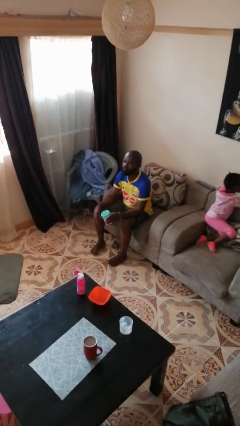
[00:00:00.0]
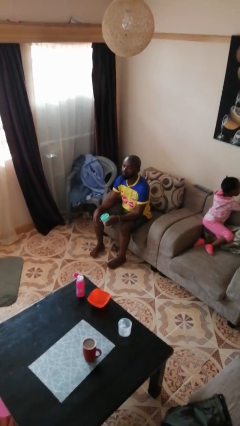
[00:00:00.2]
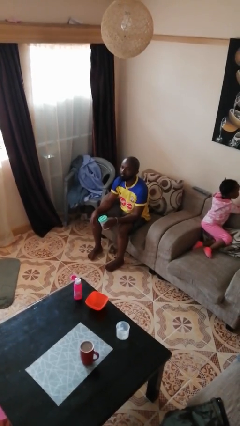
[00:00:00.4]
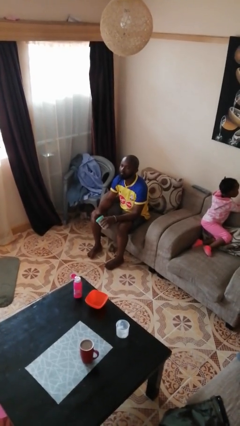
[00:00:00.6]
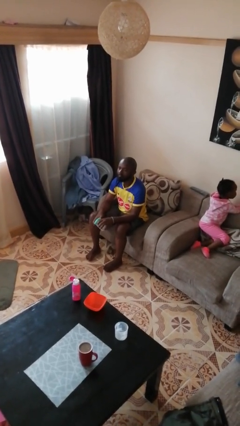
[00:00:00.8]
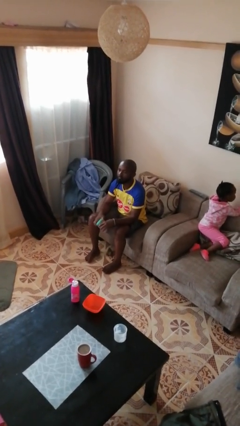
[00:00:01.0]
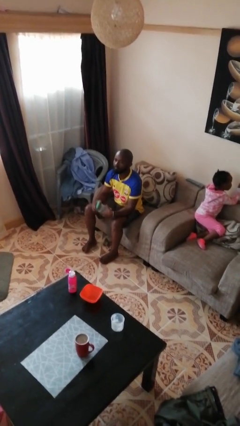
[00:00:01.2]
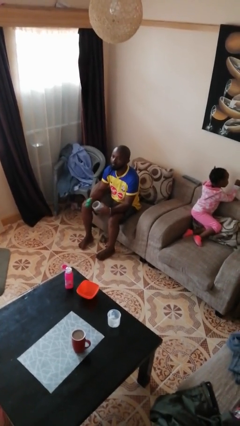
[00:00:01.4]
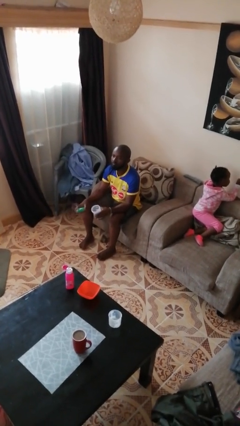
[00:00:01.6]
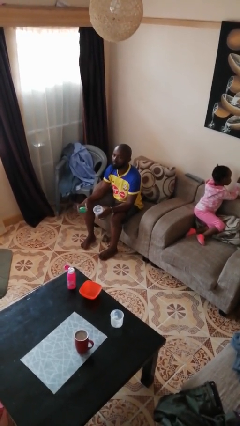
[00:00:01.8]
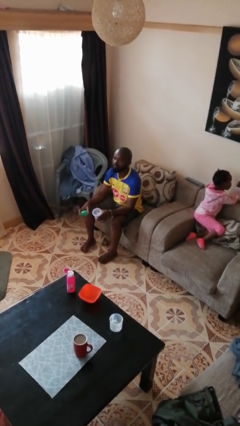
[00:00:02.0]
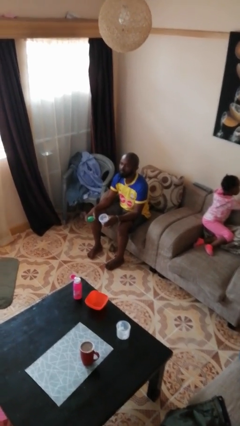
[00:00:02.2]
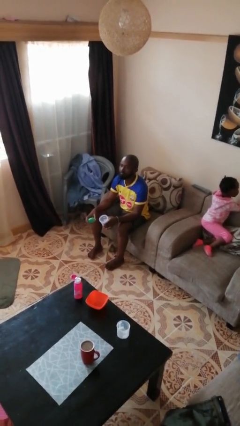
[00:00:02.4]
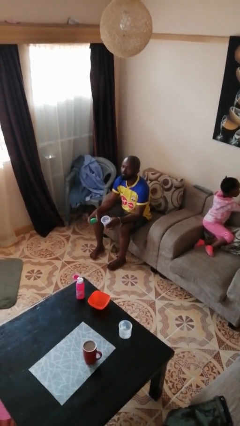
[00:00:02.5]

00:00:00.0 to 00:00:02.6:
person opens jar

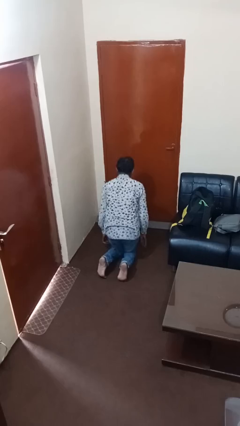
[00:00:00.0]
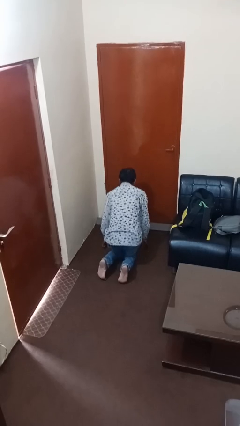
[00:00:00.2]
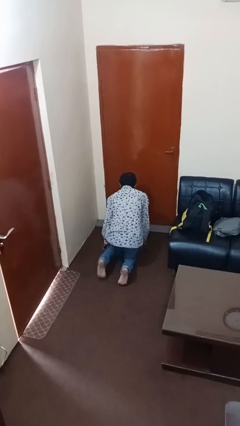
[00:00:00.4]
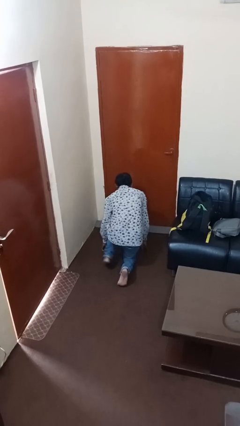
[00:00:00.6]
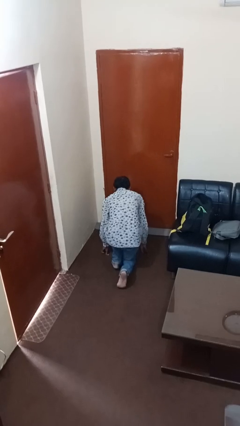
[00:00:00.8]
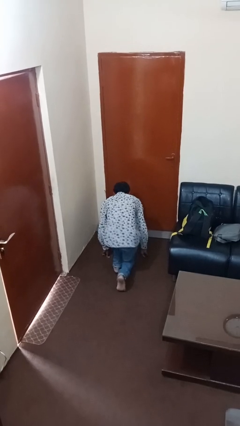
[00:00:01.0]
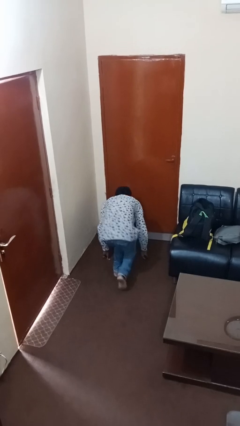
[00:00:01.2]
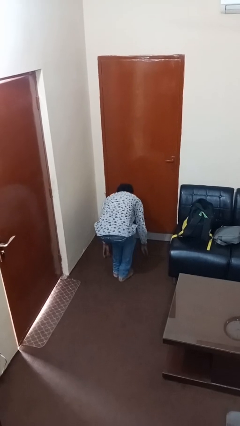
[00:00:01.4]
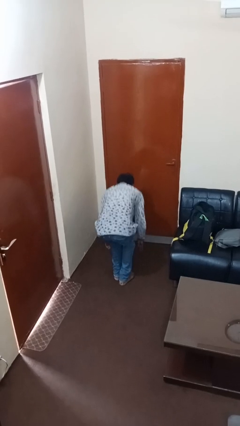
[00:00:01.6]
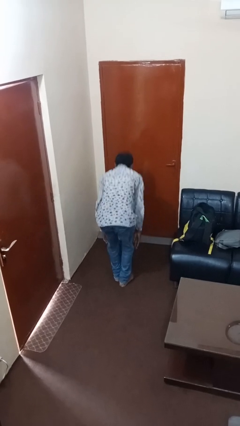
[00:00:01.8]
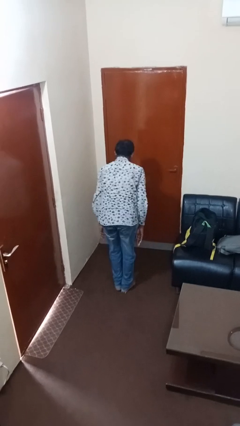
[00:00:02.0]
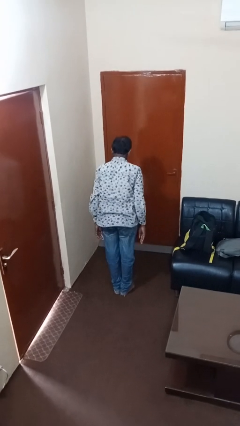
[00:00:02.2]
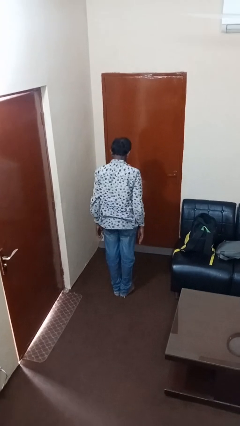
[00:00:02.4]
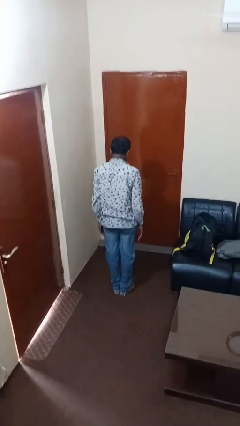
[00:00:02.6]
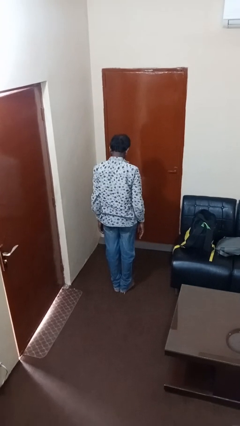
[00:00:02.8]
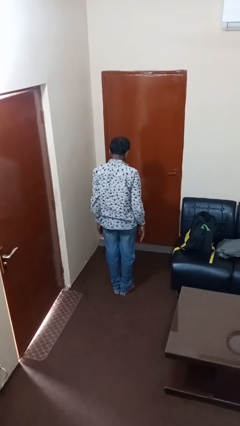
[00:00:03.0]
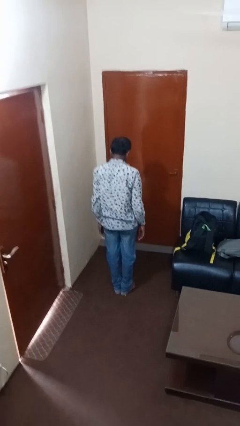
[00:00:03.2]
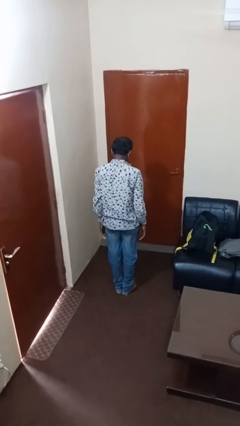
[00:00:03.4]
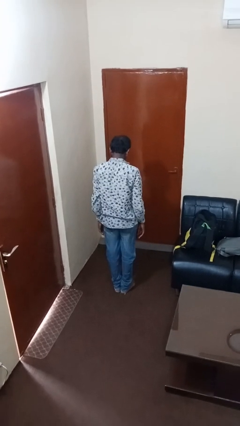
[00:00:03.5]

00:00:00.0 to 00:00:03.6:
person stands up from floor

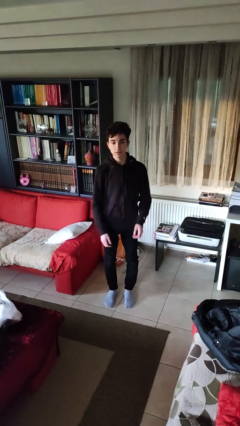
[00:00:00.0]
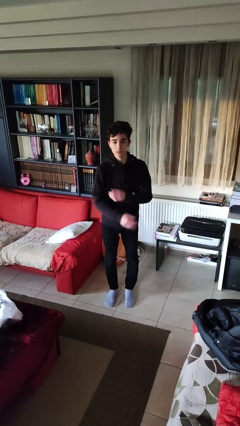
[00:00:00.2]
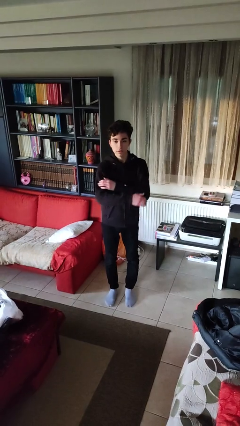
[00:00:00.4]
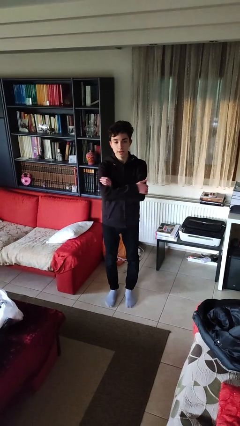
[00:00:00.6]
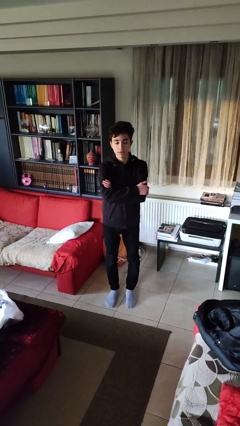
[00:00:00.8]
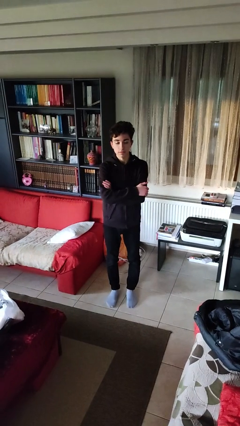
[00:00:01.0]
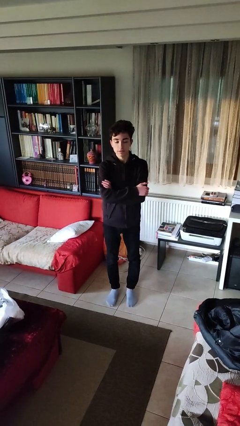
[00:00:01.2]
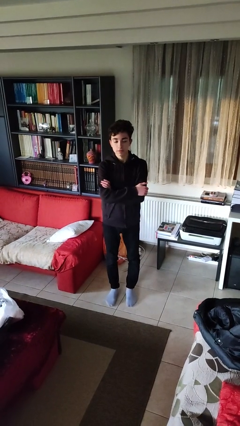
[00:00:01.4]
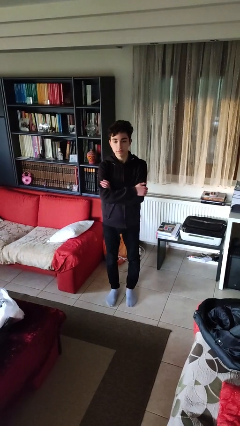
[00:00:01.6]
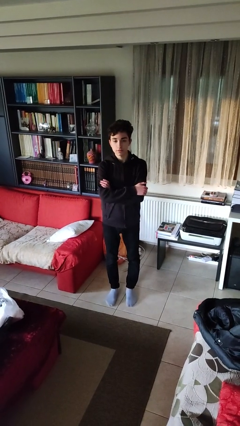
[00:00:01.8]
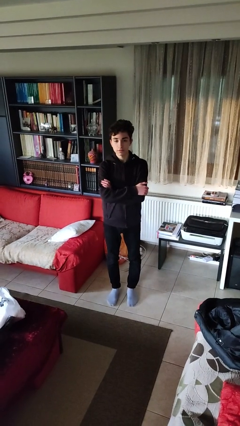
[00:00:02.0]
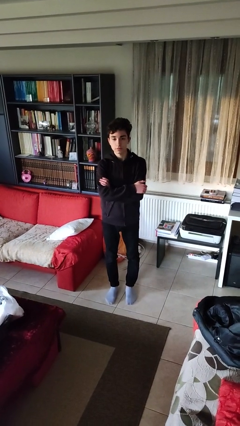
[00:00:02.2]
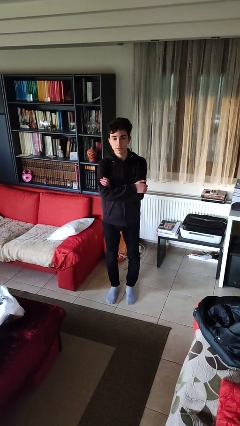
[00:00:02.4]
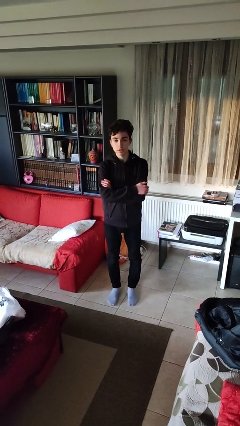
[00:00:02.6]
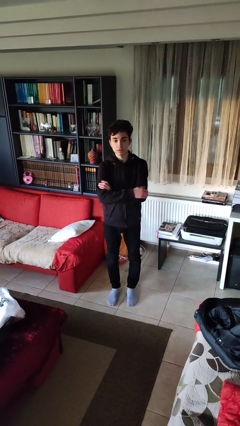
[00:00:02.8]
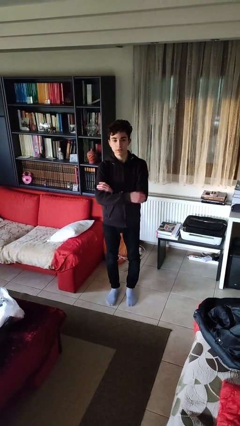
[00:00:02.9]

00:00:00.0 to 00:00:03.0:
person crosses arms

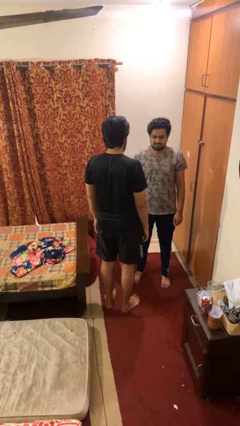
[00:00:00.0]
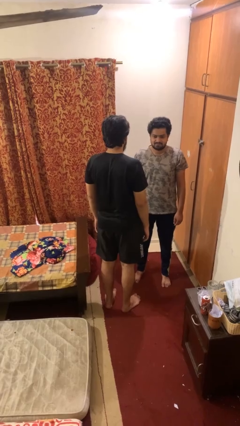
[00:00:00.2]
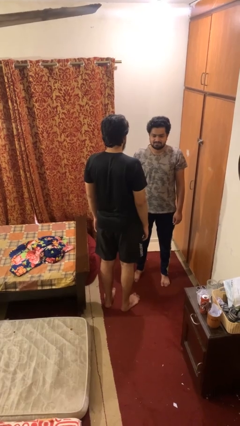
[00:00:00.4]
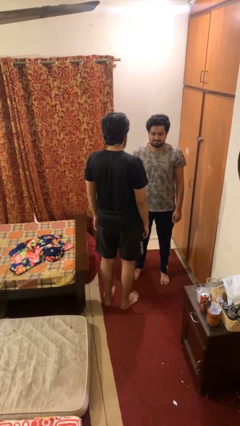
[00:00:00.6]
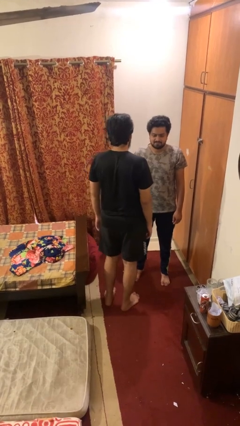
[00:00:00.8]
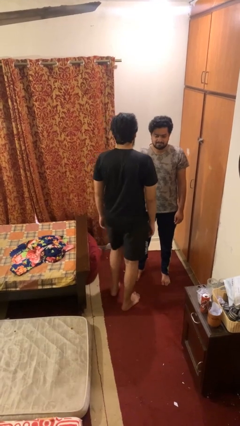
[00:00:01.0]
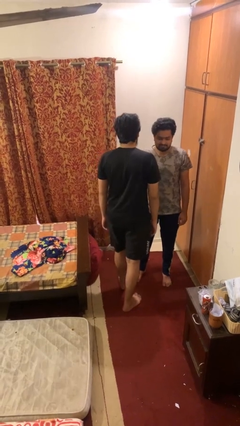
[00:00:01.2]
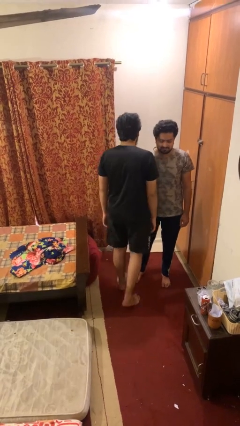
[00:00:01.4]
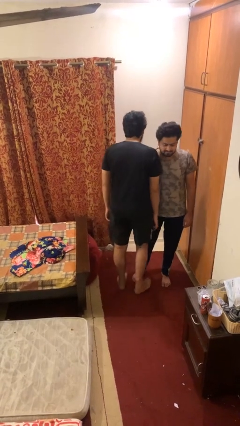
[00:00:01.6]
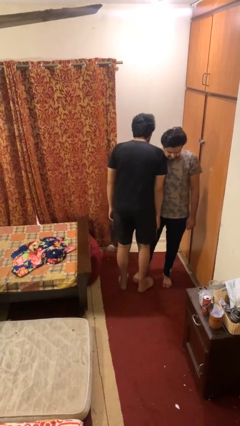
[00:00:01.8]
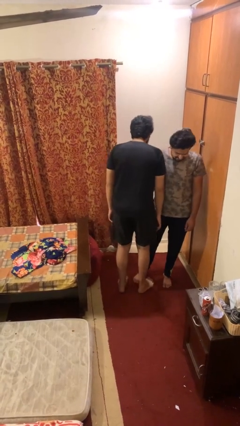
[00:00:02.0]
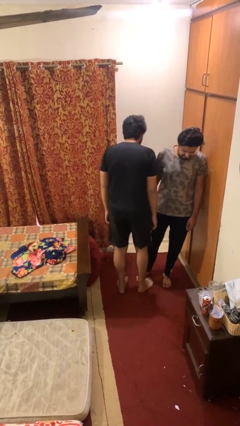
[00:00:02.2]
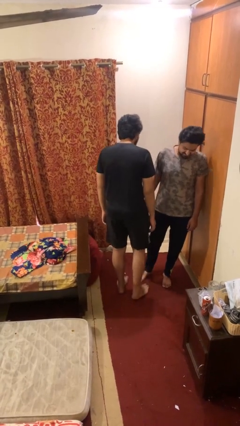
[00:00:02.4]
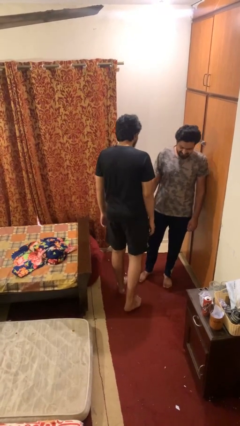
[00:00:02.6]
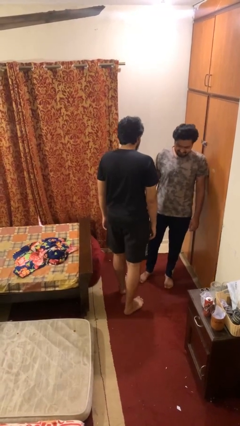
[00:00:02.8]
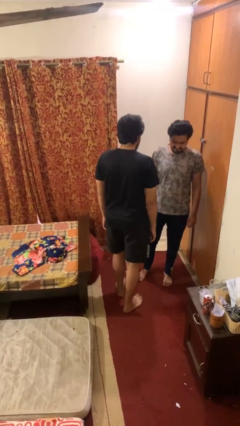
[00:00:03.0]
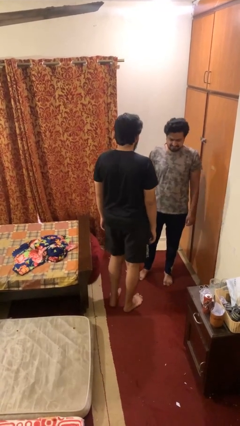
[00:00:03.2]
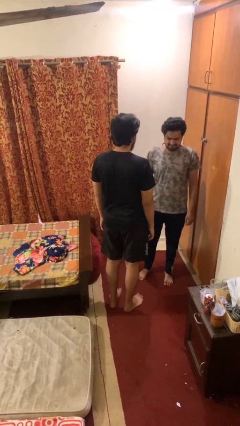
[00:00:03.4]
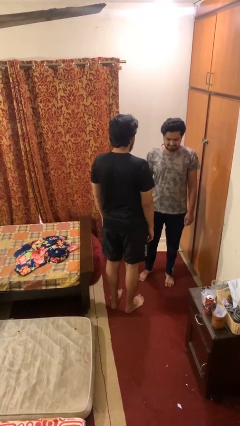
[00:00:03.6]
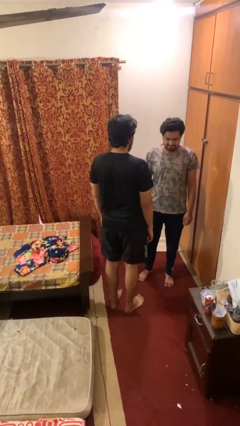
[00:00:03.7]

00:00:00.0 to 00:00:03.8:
person bumps into person

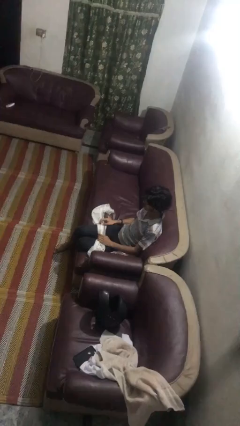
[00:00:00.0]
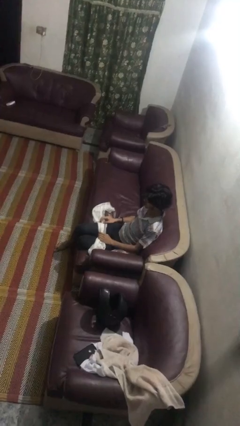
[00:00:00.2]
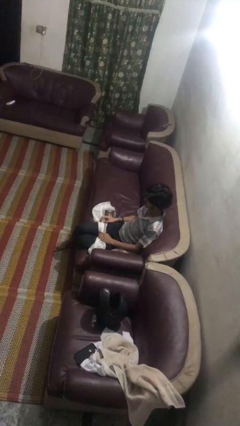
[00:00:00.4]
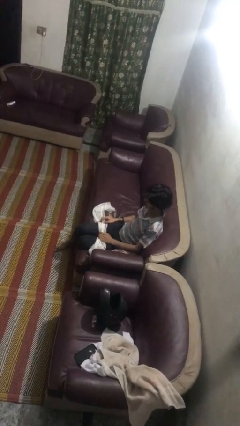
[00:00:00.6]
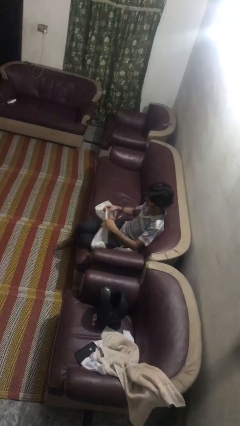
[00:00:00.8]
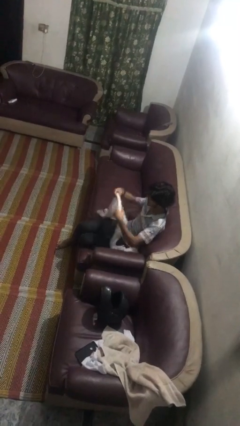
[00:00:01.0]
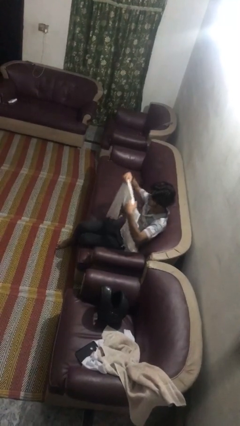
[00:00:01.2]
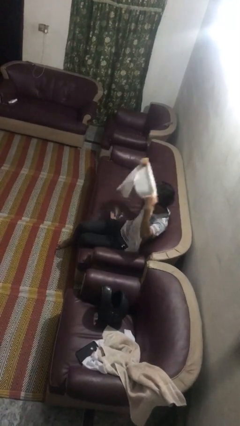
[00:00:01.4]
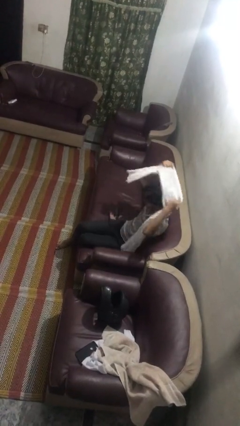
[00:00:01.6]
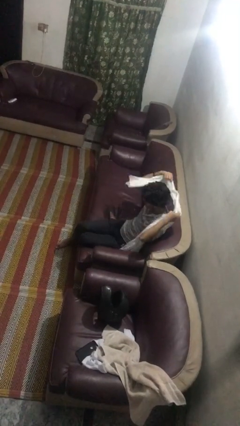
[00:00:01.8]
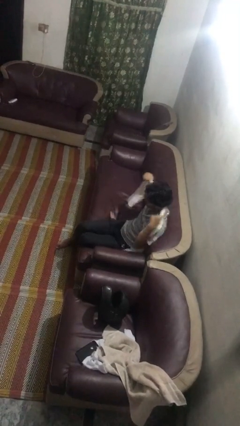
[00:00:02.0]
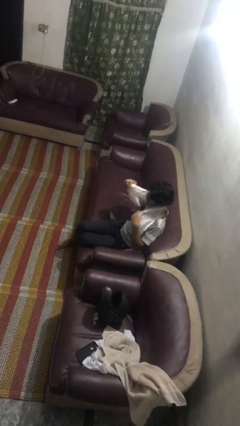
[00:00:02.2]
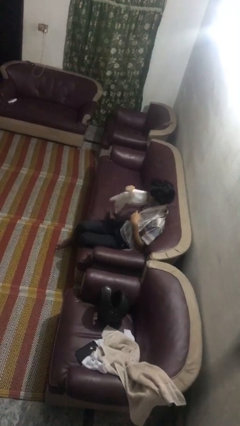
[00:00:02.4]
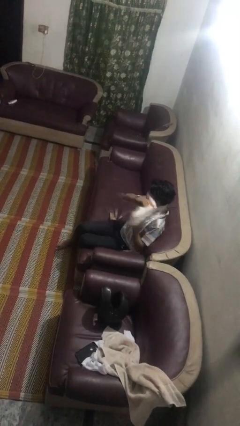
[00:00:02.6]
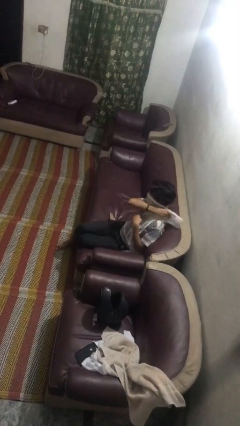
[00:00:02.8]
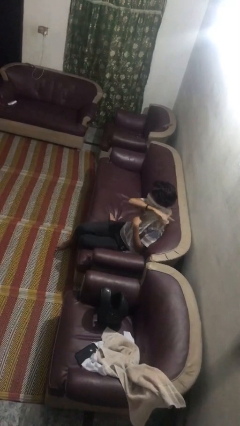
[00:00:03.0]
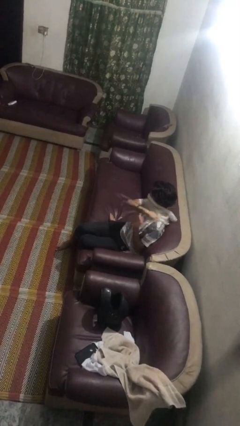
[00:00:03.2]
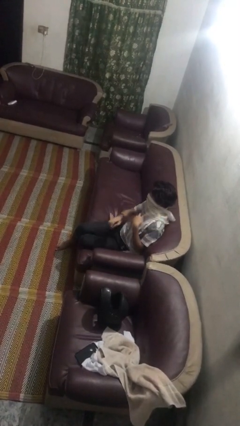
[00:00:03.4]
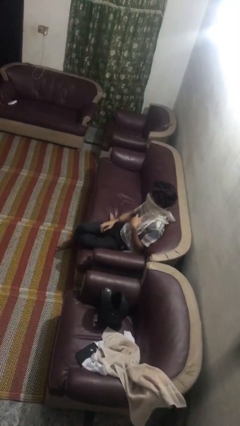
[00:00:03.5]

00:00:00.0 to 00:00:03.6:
person puts on scarf

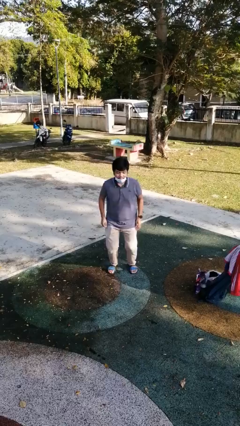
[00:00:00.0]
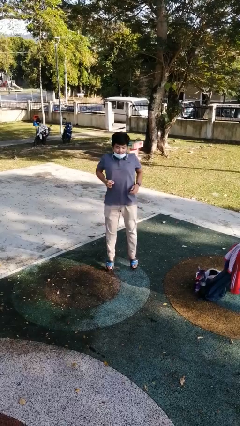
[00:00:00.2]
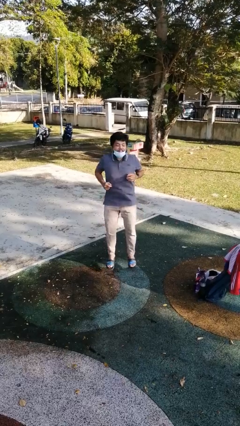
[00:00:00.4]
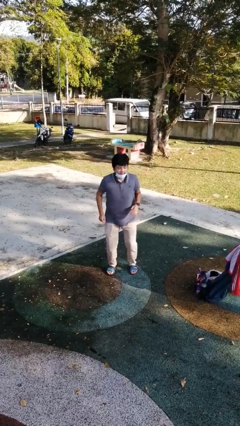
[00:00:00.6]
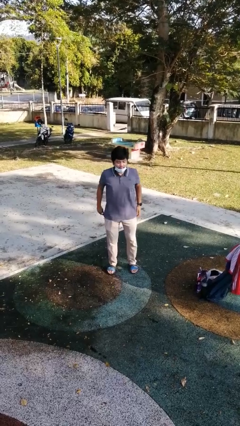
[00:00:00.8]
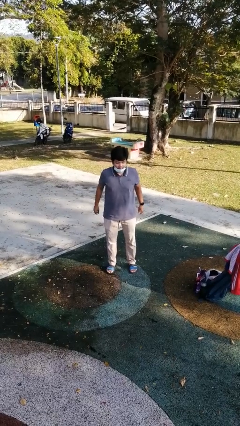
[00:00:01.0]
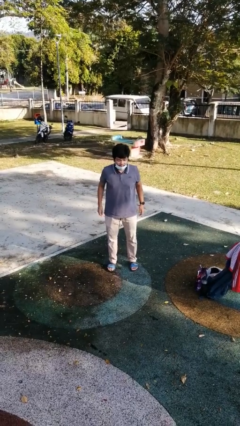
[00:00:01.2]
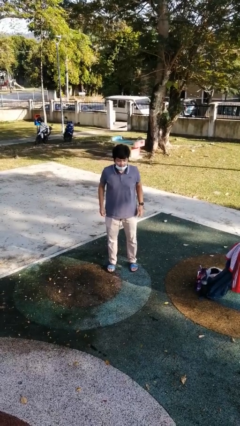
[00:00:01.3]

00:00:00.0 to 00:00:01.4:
person jumps
